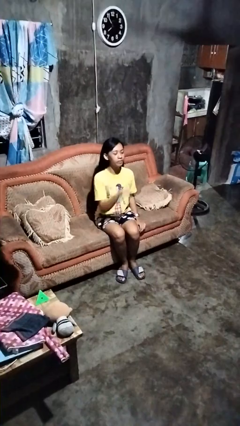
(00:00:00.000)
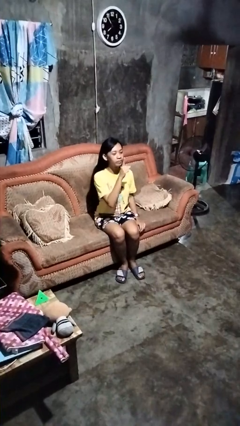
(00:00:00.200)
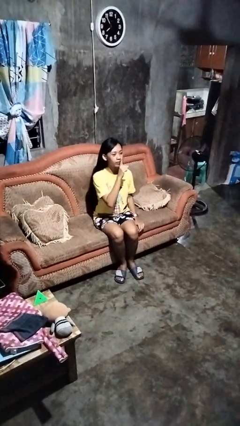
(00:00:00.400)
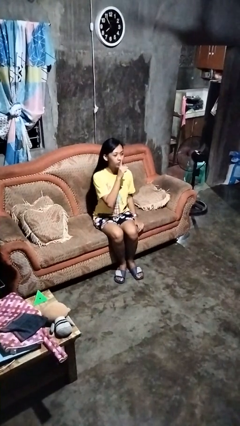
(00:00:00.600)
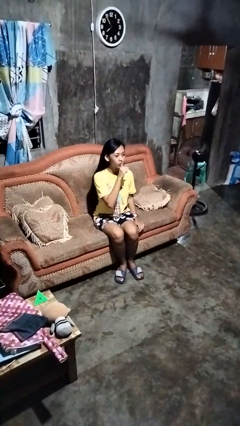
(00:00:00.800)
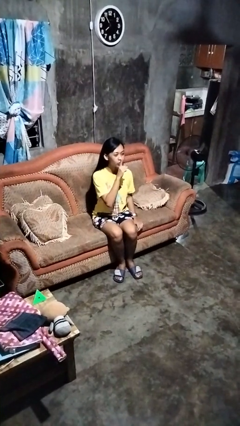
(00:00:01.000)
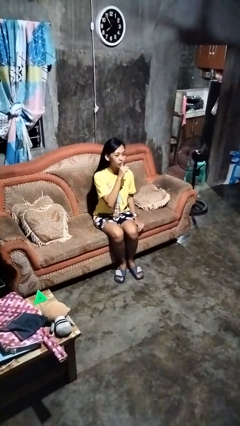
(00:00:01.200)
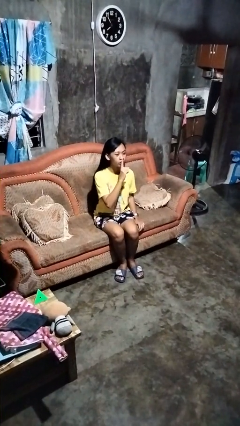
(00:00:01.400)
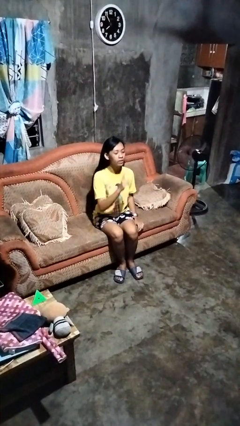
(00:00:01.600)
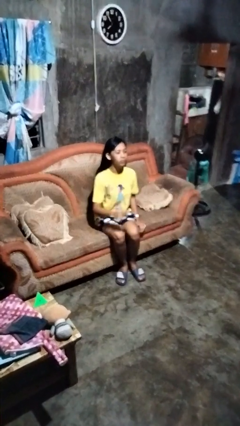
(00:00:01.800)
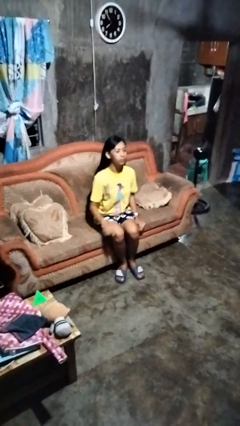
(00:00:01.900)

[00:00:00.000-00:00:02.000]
person gestures be quiet

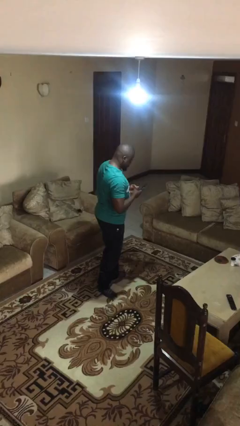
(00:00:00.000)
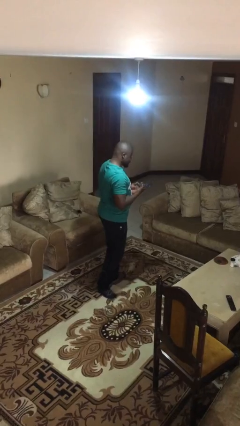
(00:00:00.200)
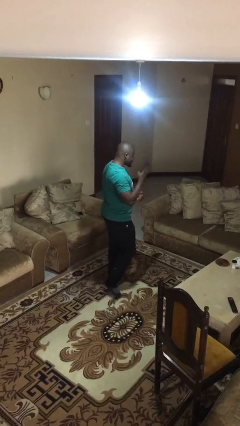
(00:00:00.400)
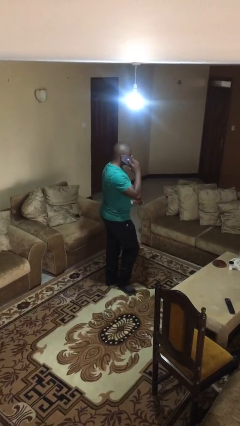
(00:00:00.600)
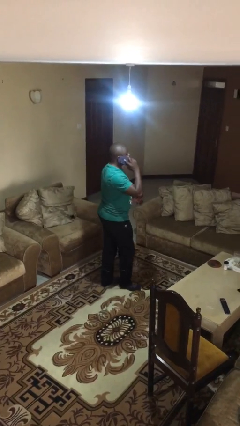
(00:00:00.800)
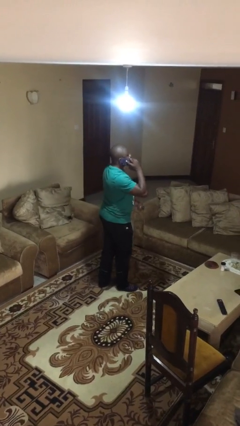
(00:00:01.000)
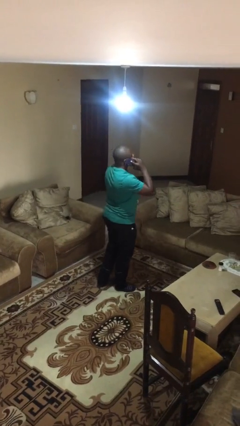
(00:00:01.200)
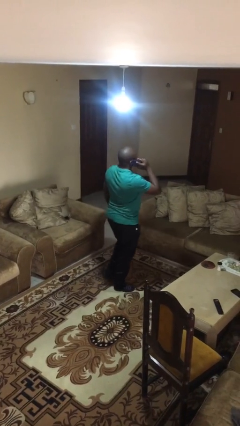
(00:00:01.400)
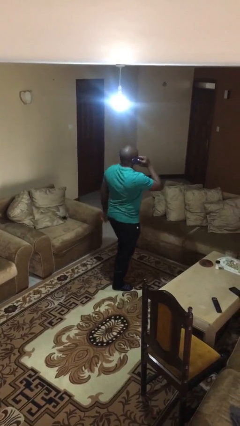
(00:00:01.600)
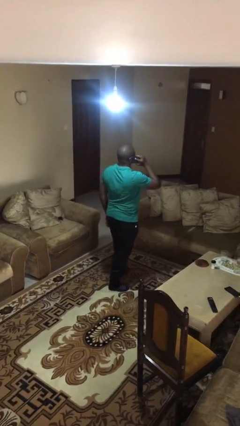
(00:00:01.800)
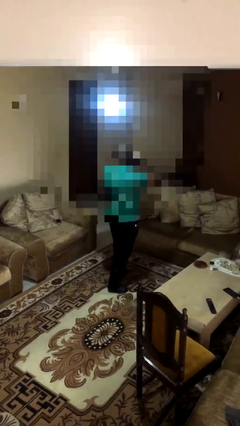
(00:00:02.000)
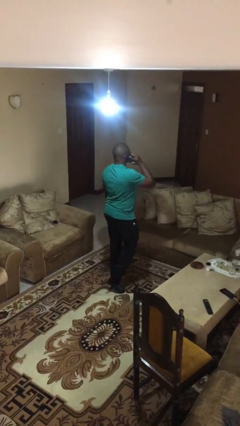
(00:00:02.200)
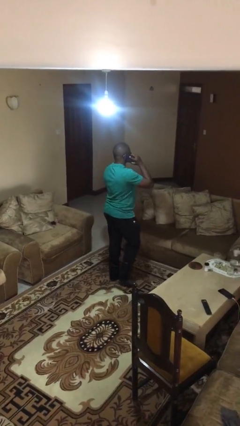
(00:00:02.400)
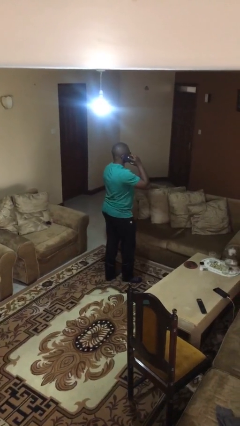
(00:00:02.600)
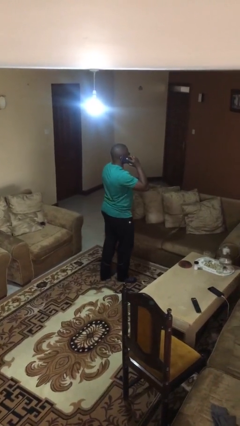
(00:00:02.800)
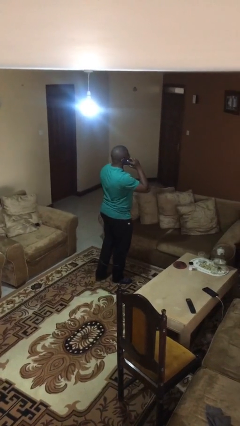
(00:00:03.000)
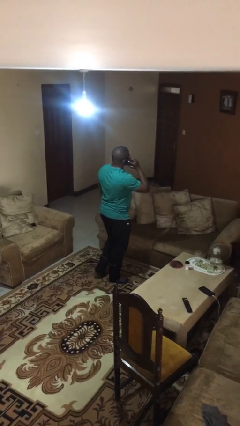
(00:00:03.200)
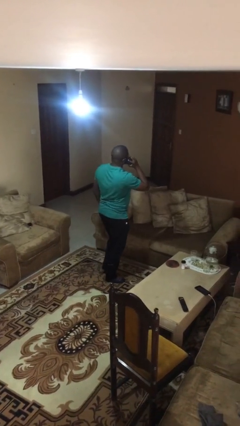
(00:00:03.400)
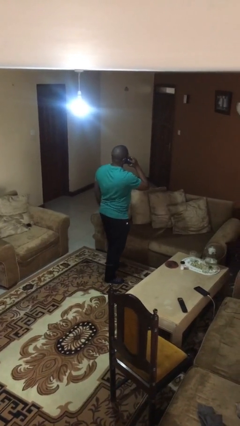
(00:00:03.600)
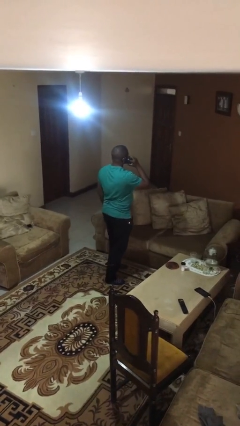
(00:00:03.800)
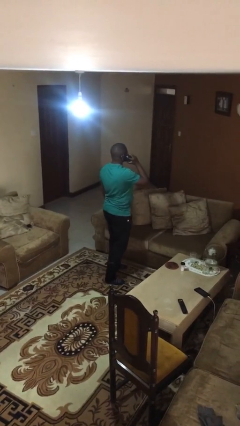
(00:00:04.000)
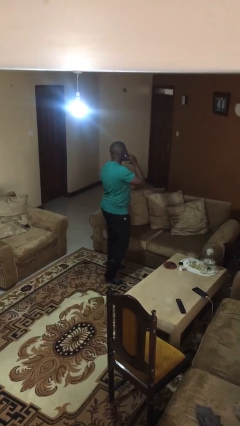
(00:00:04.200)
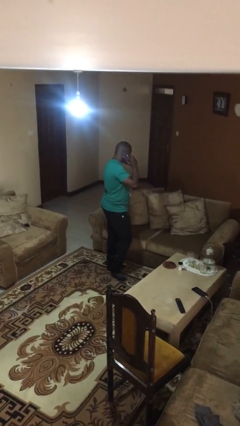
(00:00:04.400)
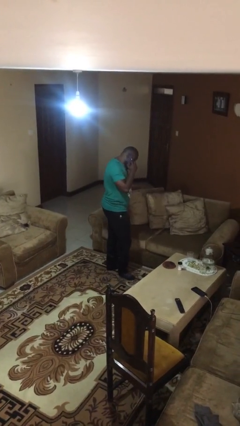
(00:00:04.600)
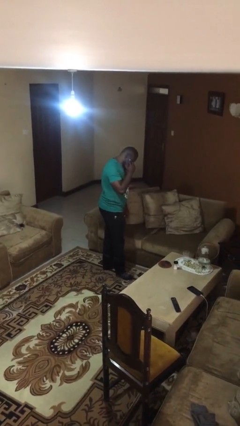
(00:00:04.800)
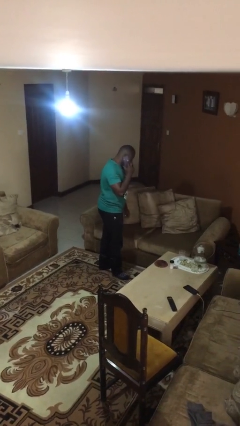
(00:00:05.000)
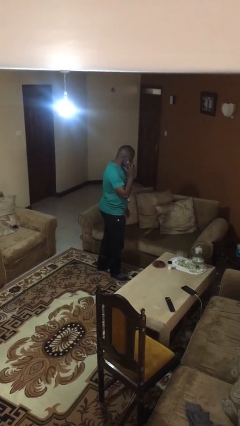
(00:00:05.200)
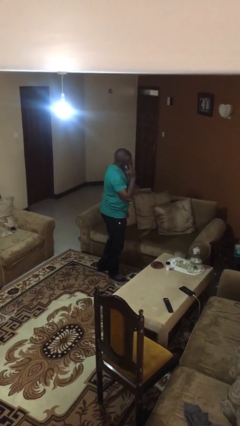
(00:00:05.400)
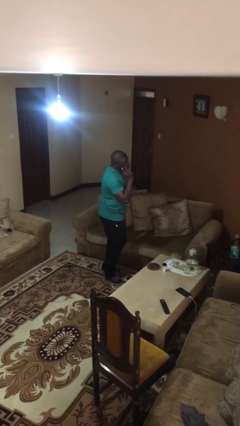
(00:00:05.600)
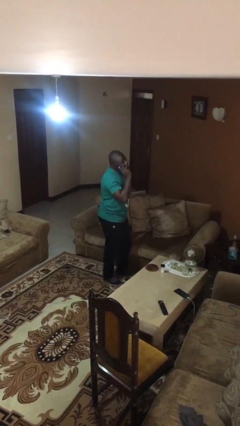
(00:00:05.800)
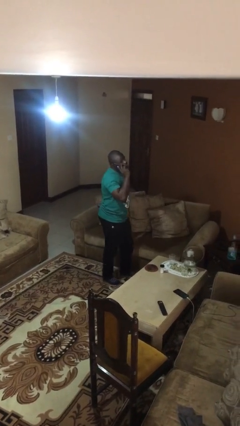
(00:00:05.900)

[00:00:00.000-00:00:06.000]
person talks on phone

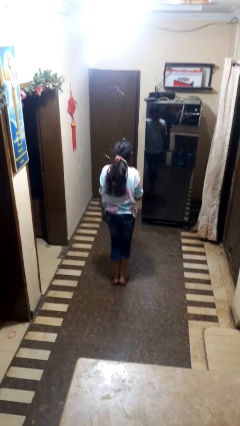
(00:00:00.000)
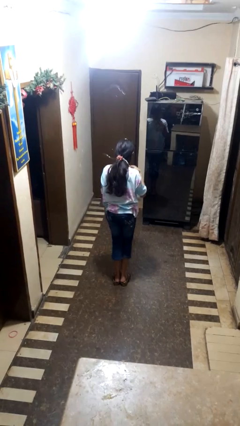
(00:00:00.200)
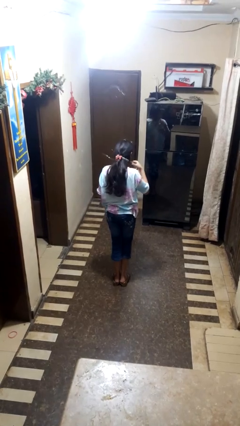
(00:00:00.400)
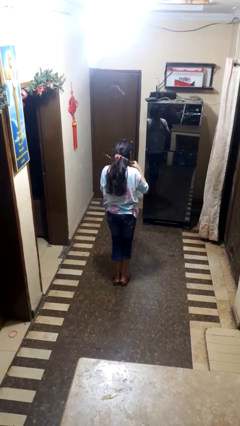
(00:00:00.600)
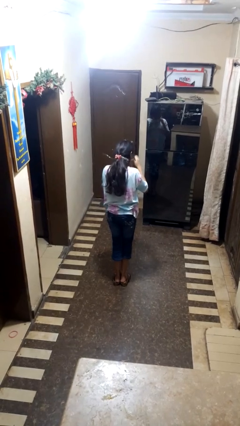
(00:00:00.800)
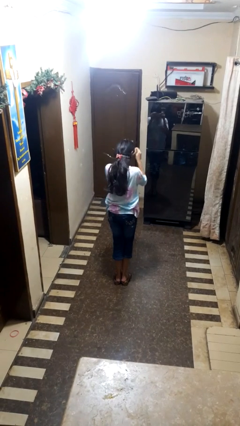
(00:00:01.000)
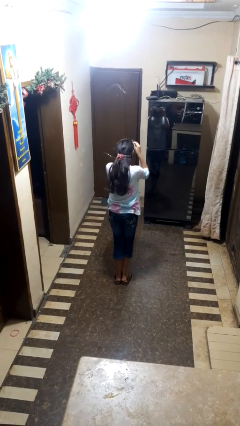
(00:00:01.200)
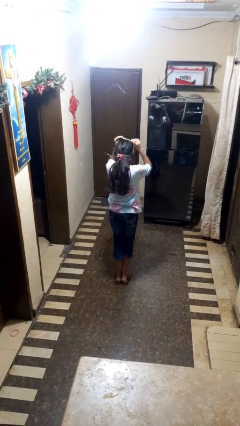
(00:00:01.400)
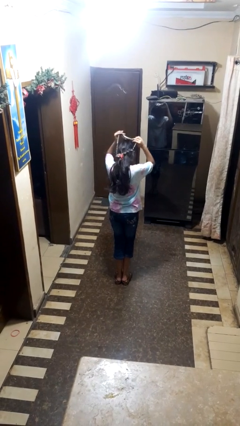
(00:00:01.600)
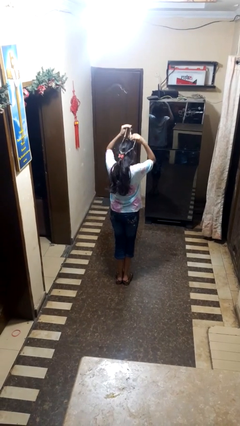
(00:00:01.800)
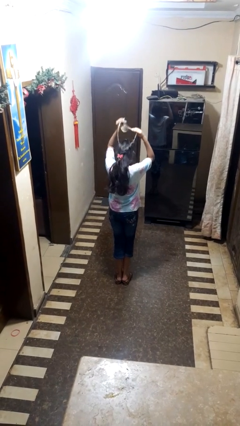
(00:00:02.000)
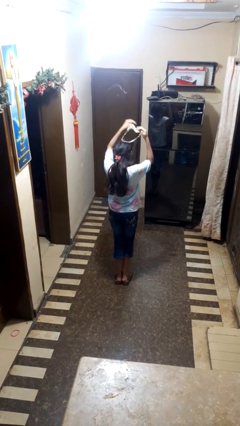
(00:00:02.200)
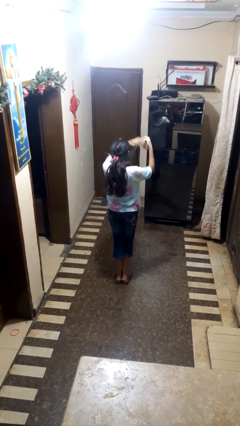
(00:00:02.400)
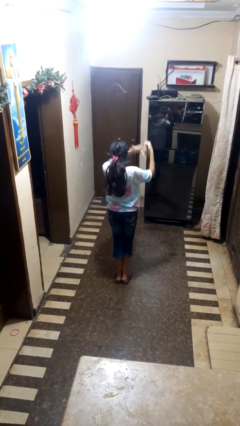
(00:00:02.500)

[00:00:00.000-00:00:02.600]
person takes off necklace

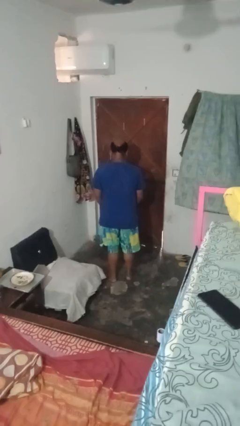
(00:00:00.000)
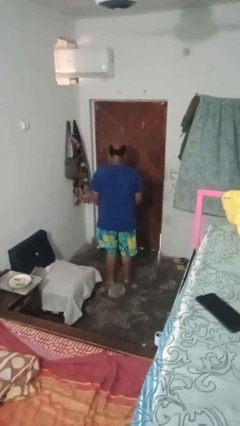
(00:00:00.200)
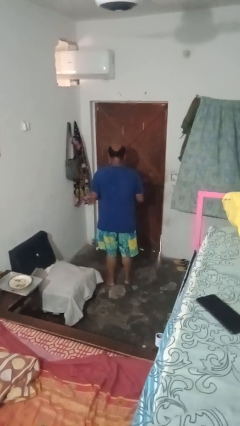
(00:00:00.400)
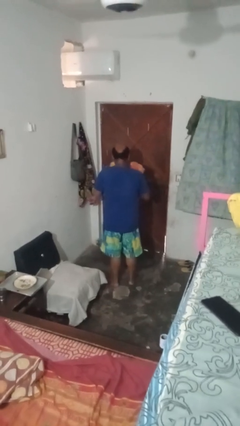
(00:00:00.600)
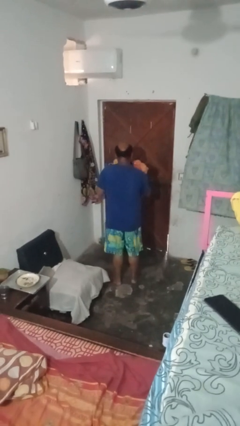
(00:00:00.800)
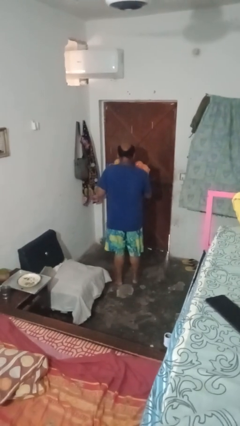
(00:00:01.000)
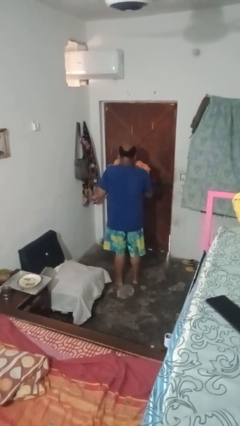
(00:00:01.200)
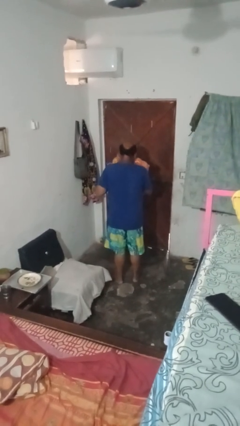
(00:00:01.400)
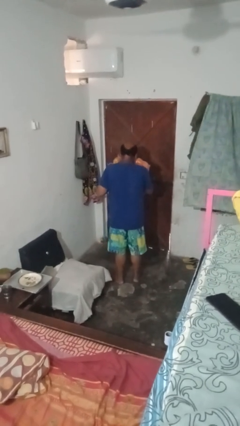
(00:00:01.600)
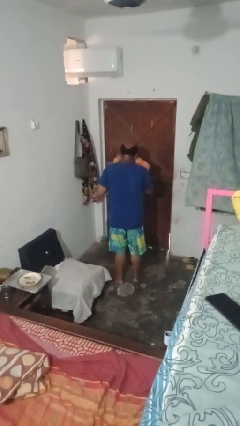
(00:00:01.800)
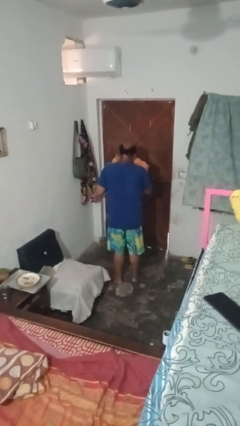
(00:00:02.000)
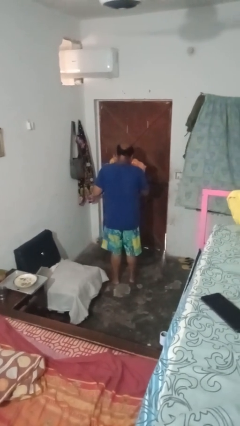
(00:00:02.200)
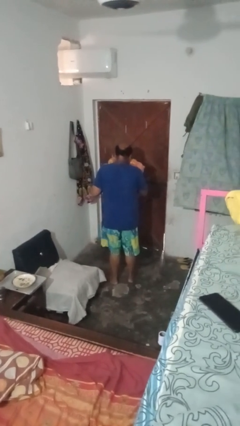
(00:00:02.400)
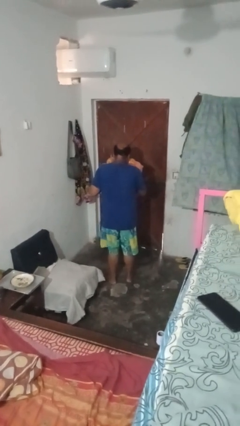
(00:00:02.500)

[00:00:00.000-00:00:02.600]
person hugs stuffed animal

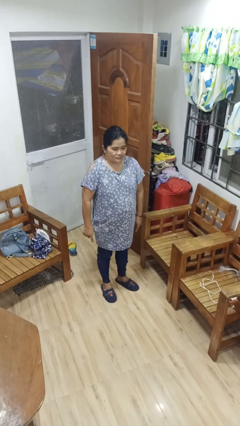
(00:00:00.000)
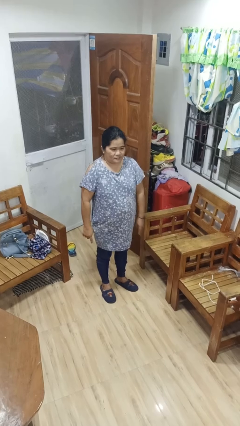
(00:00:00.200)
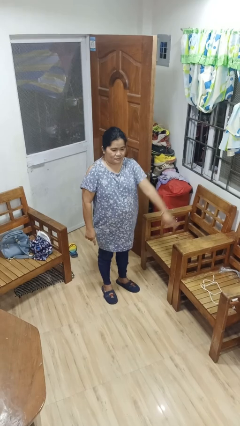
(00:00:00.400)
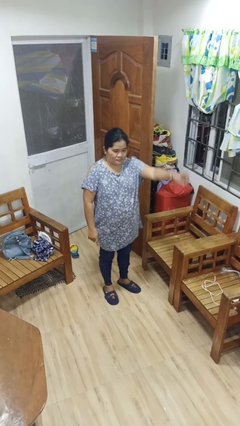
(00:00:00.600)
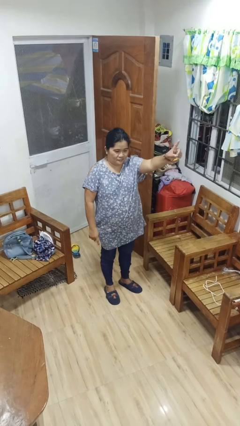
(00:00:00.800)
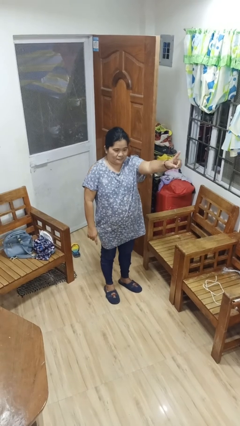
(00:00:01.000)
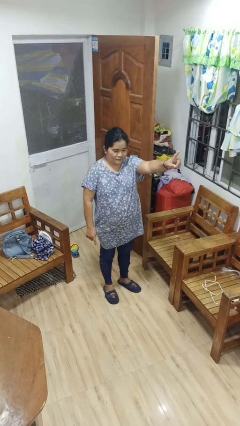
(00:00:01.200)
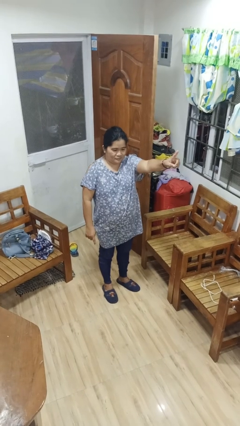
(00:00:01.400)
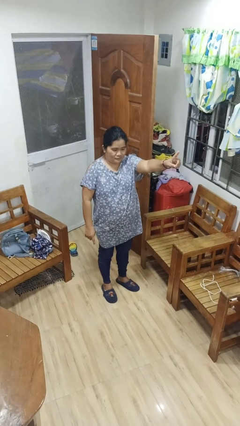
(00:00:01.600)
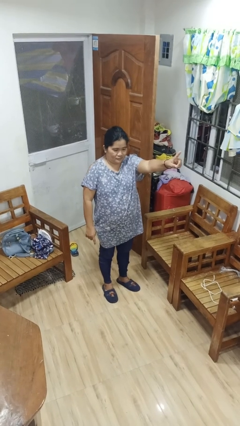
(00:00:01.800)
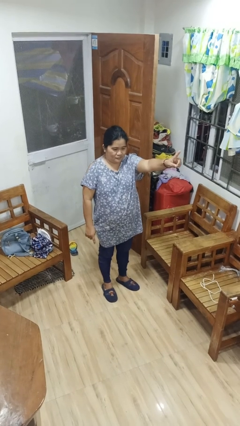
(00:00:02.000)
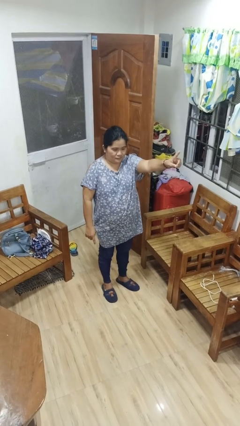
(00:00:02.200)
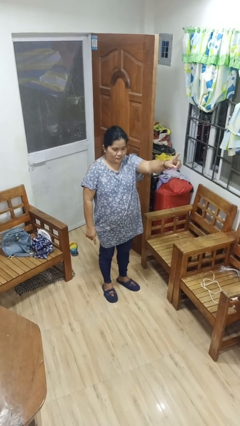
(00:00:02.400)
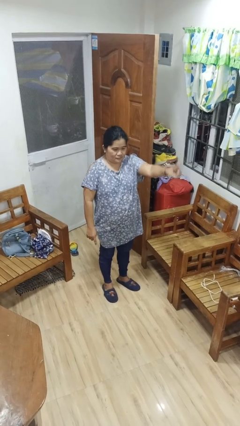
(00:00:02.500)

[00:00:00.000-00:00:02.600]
person gestures number one

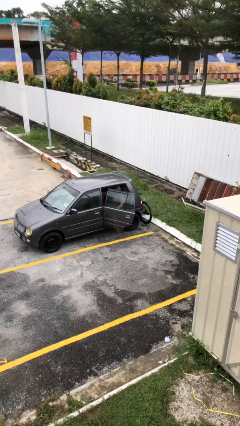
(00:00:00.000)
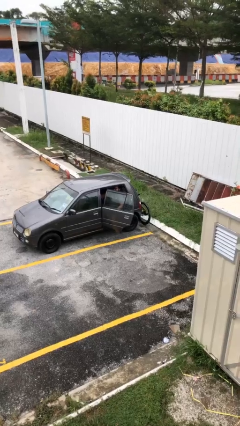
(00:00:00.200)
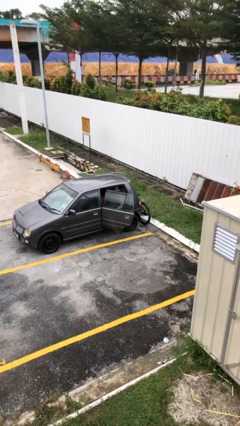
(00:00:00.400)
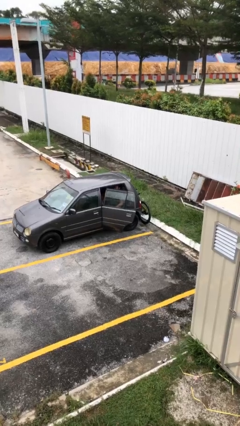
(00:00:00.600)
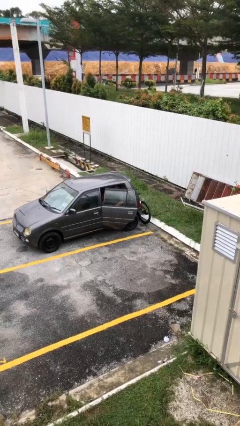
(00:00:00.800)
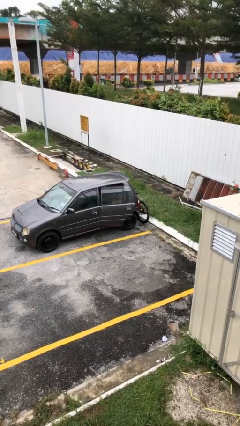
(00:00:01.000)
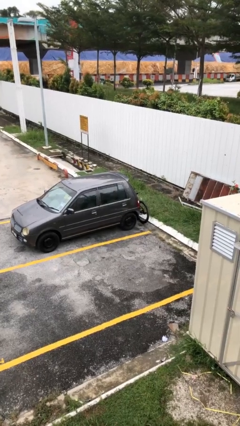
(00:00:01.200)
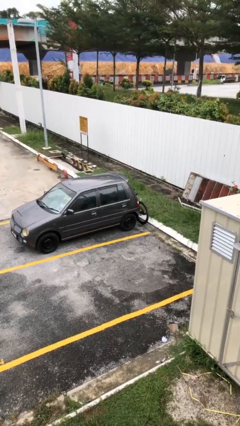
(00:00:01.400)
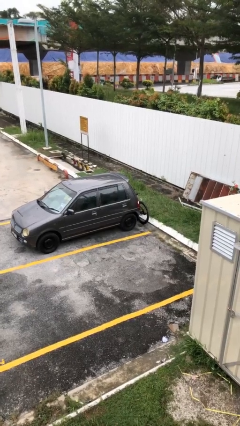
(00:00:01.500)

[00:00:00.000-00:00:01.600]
person closes car door
